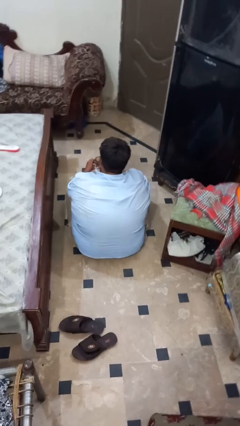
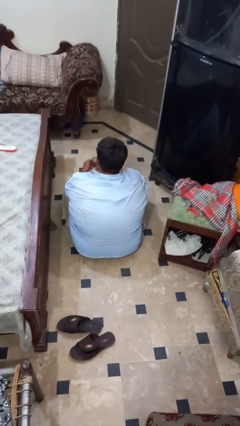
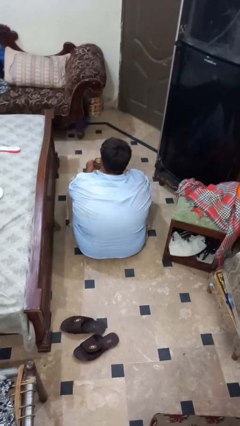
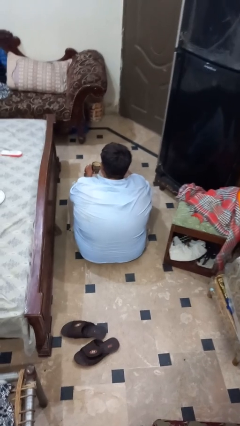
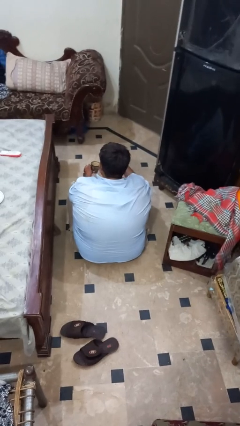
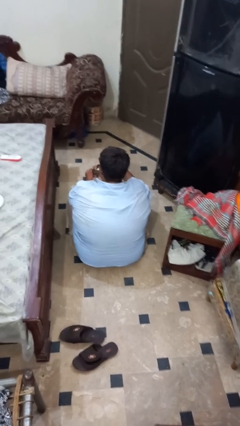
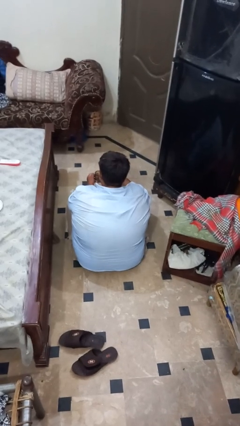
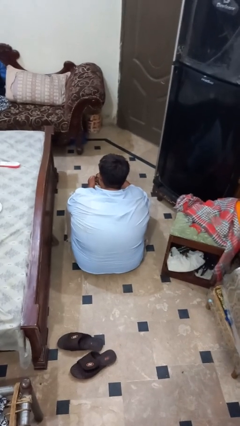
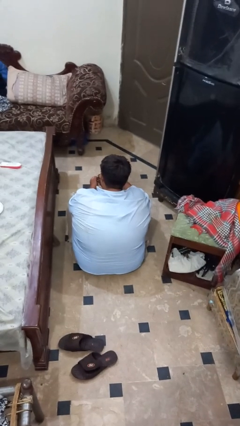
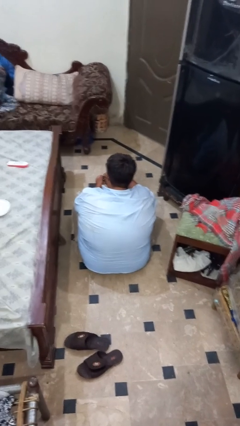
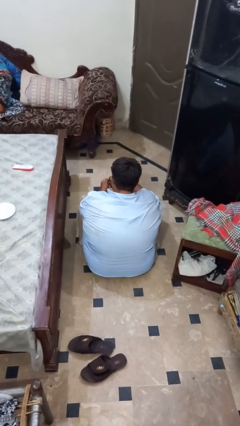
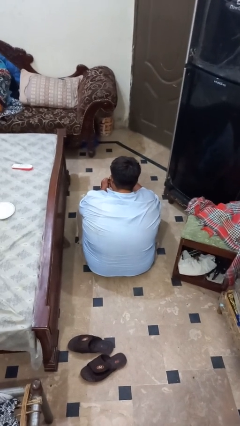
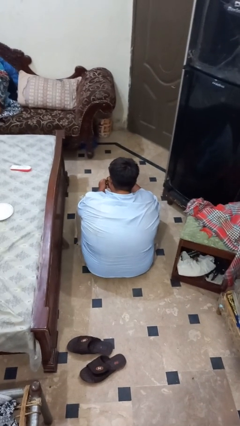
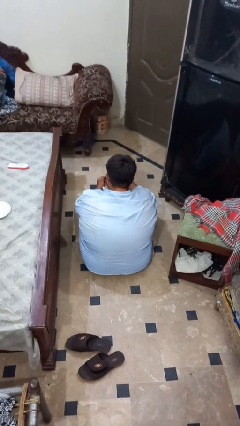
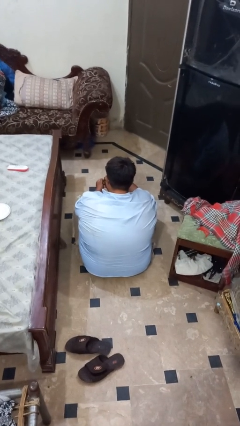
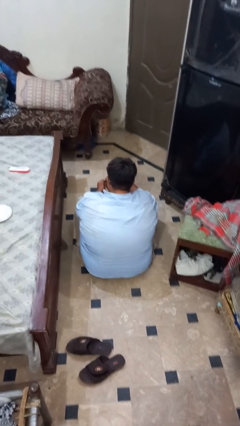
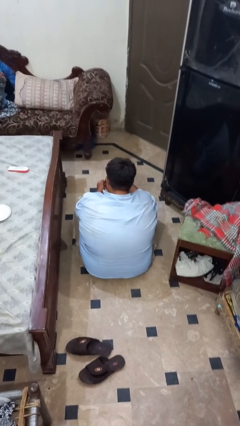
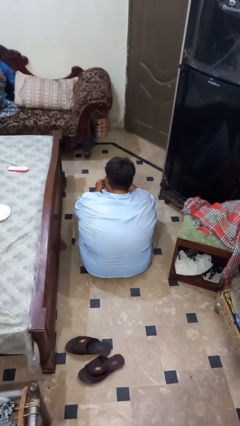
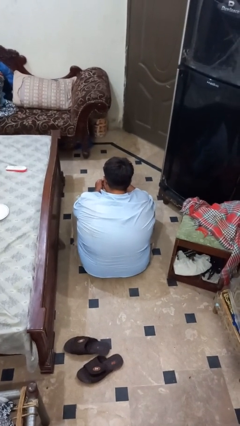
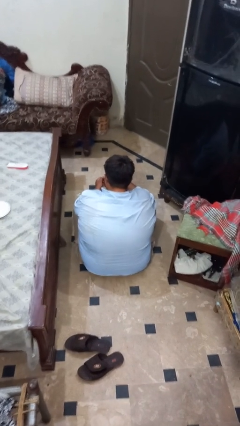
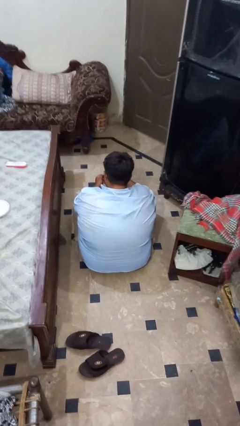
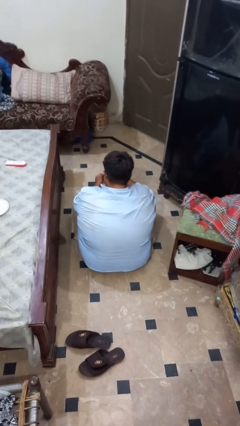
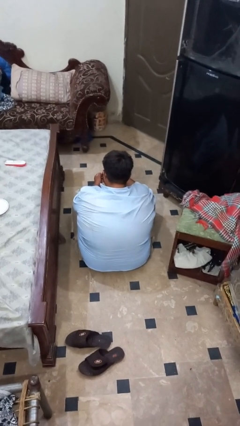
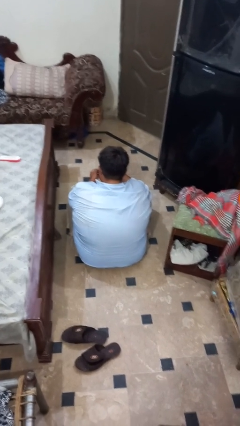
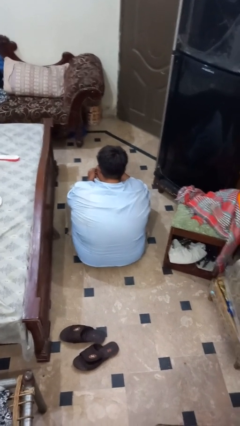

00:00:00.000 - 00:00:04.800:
person stirs mug

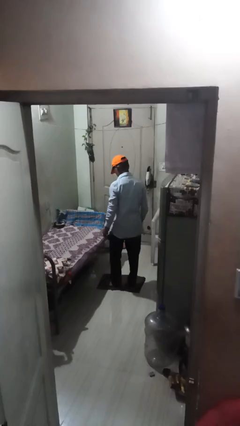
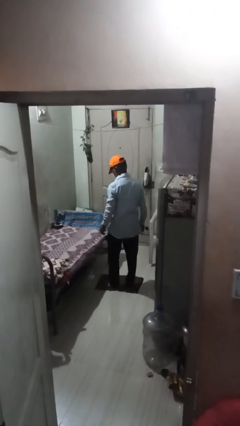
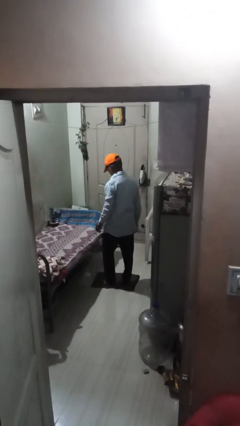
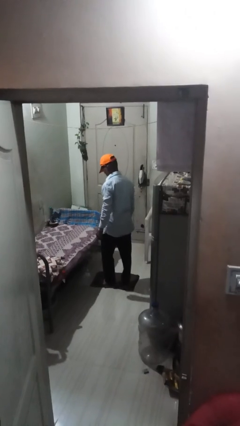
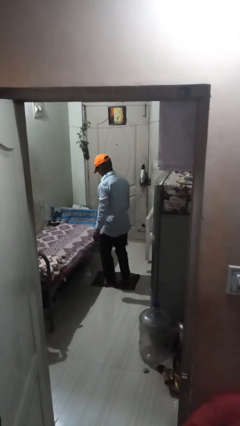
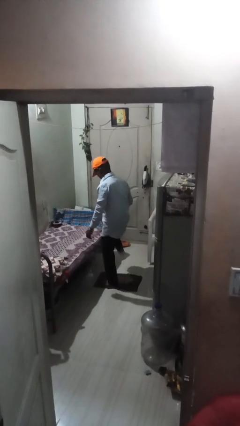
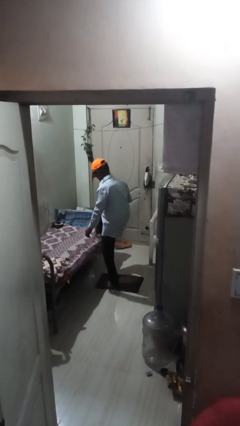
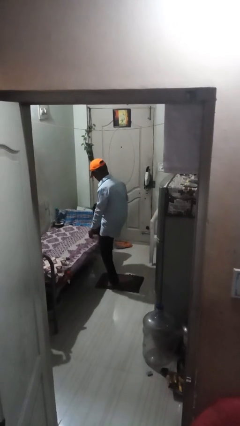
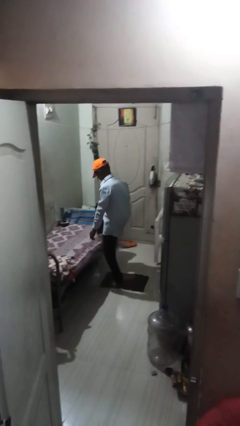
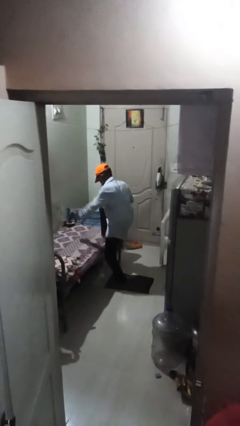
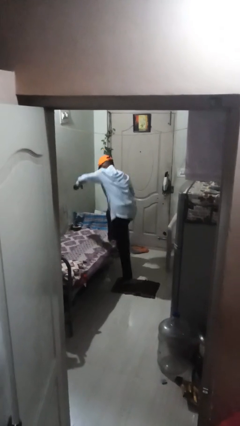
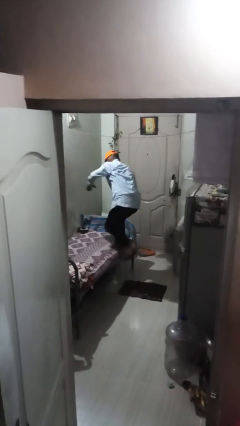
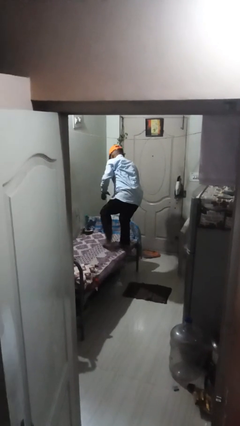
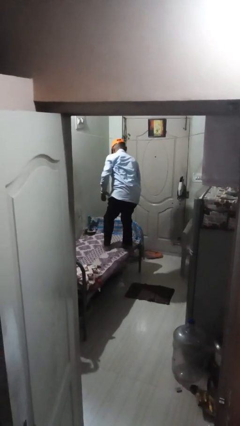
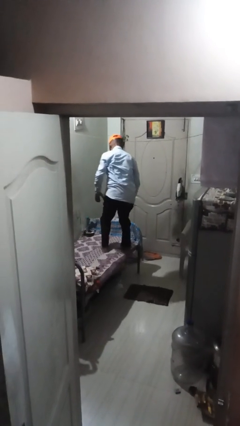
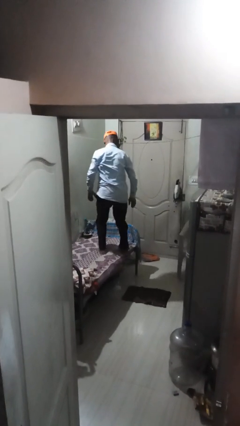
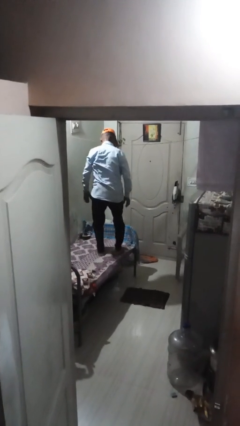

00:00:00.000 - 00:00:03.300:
person climbs on couch

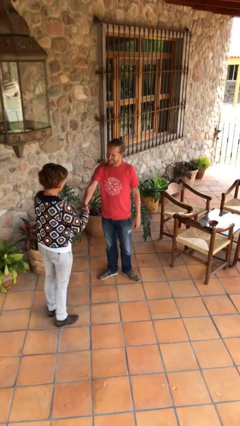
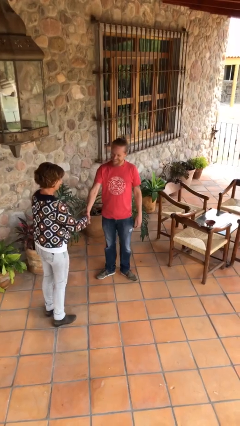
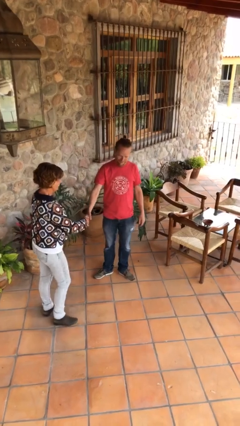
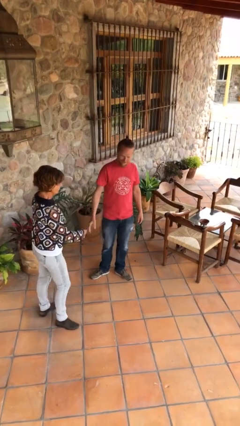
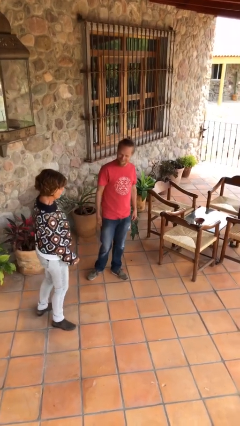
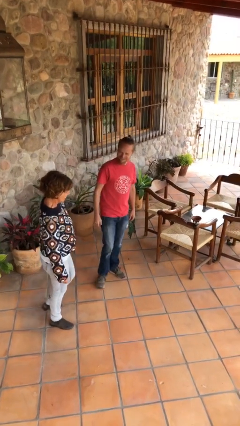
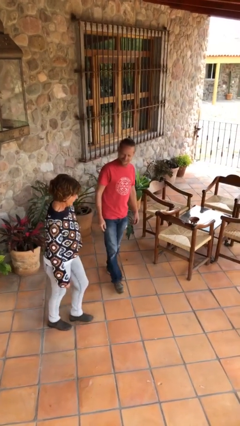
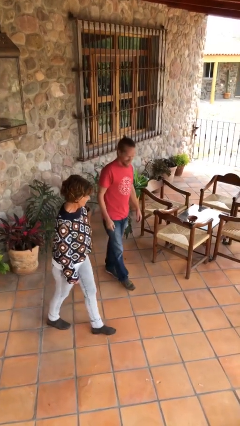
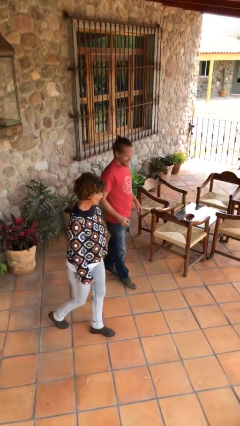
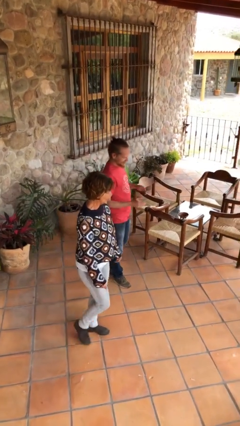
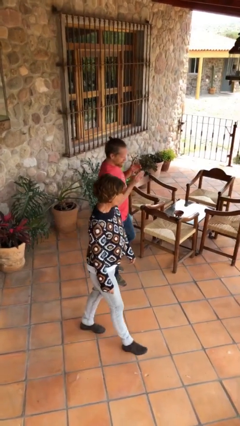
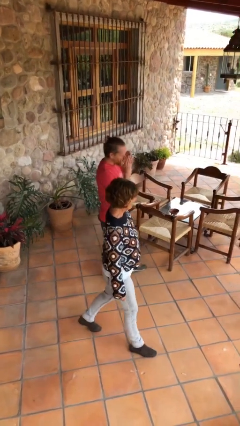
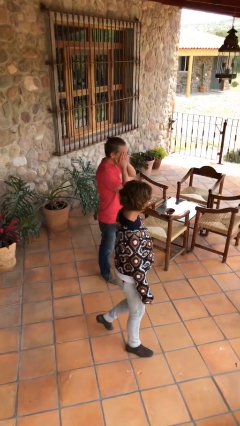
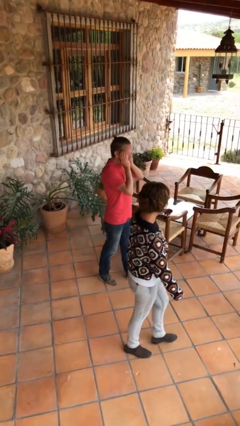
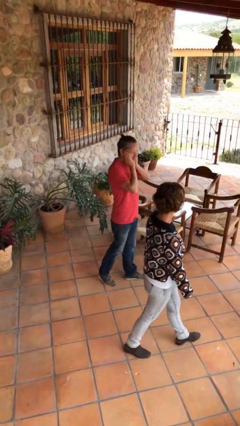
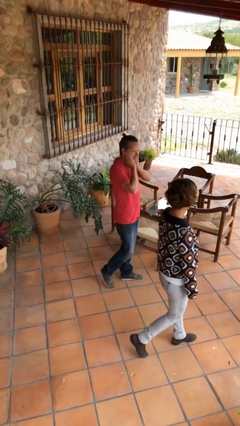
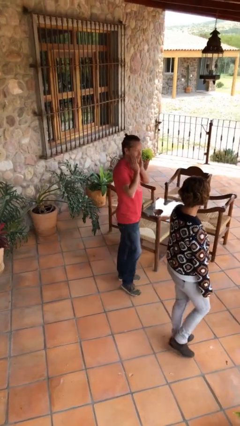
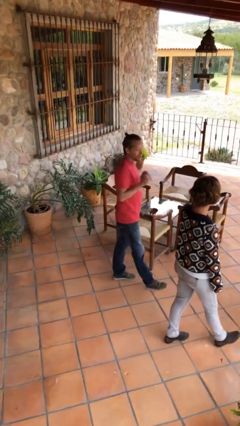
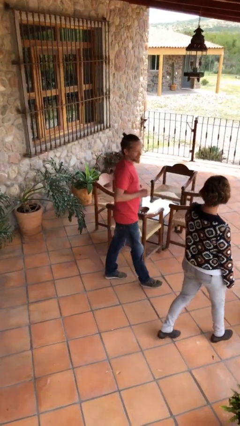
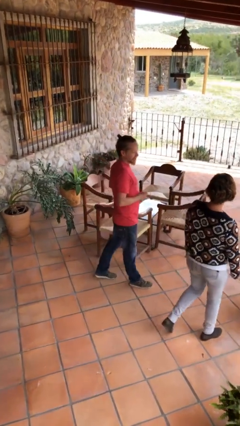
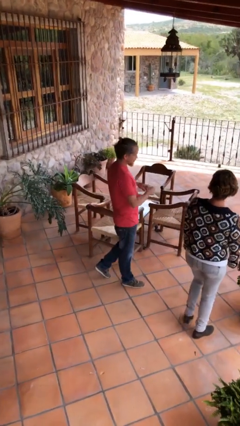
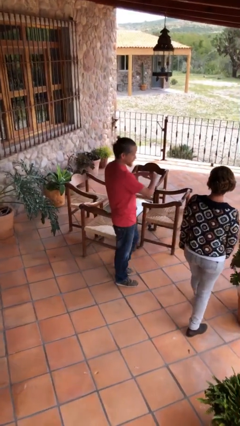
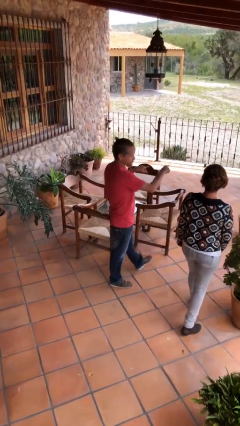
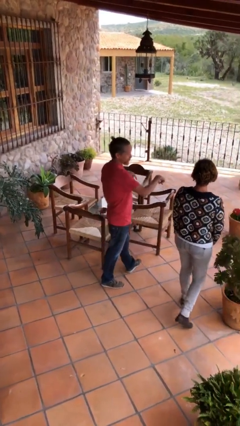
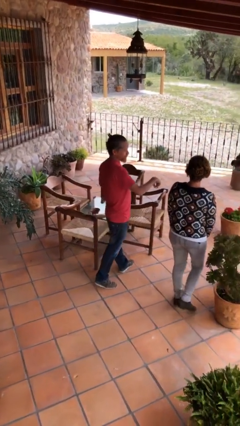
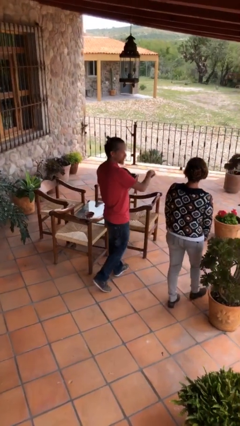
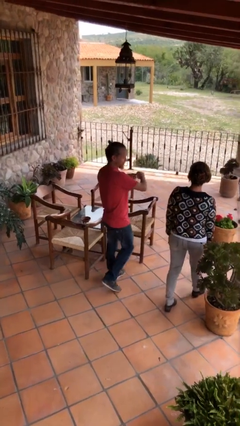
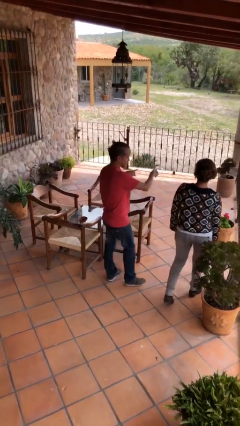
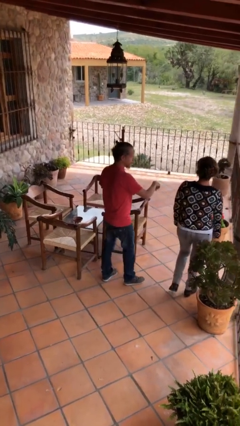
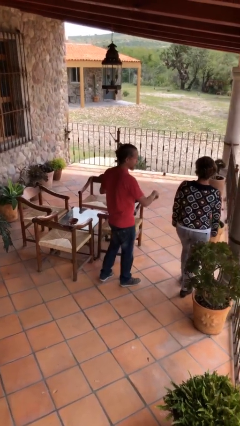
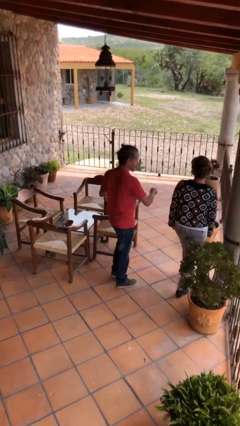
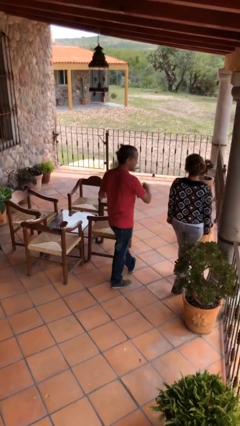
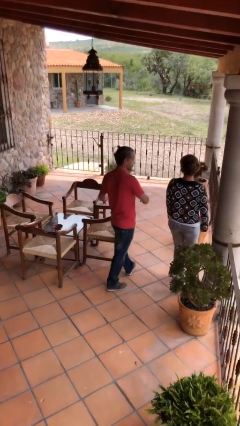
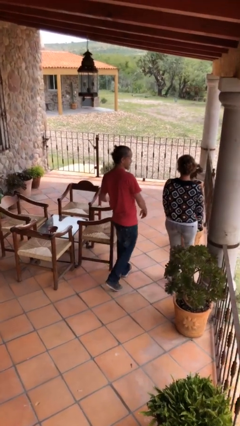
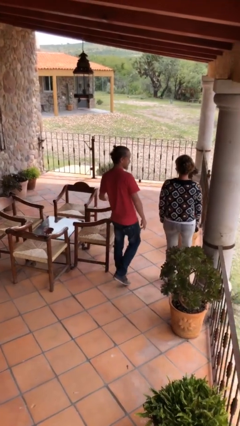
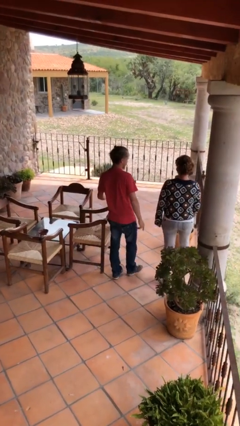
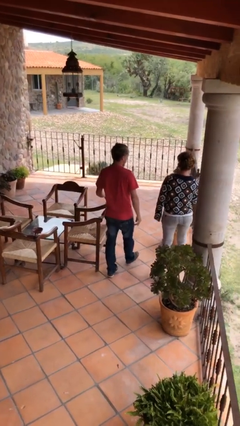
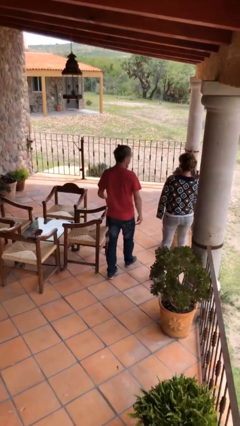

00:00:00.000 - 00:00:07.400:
person talks to person

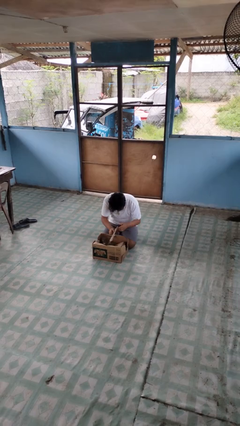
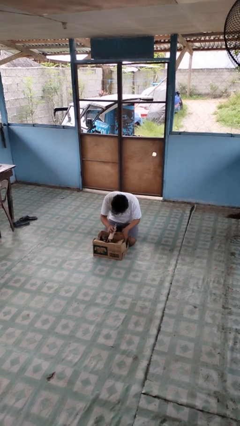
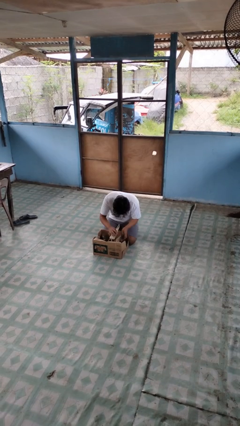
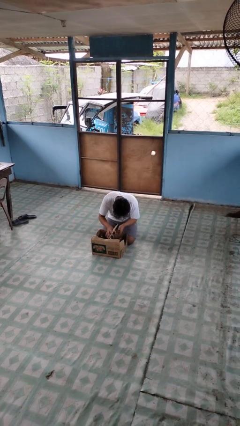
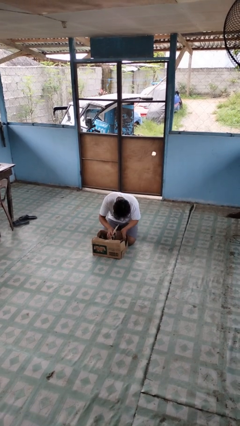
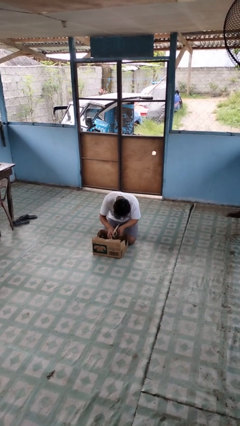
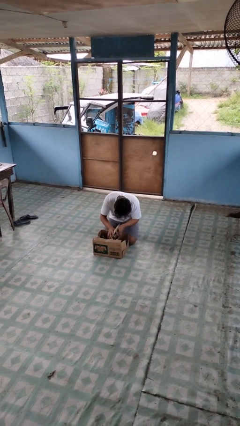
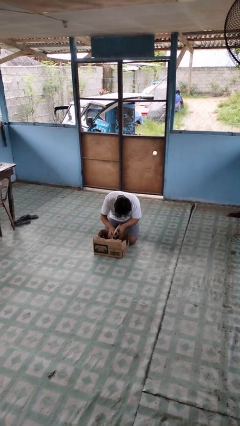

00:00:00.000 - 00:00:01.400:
person searches in box

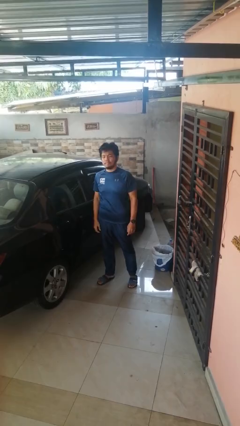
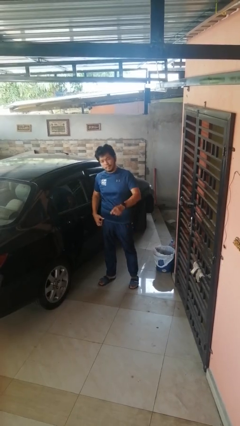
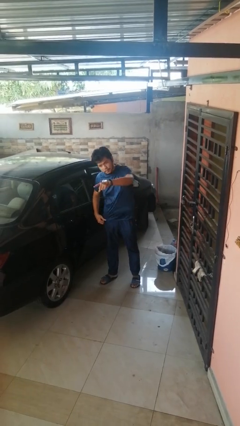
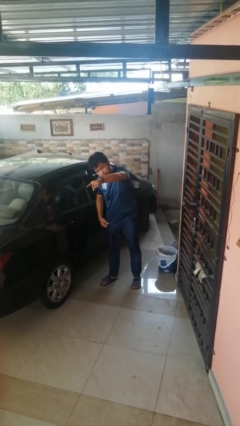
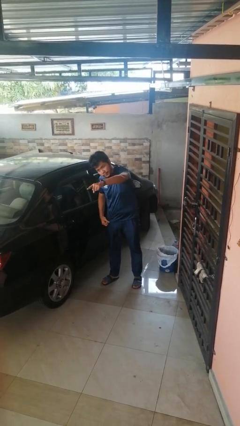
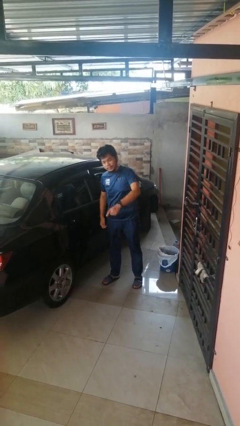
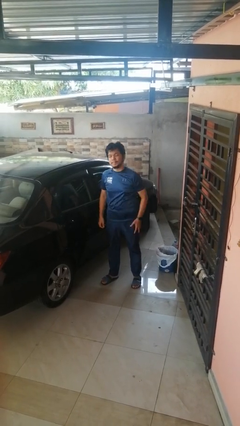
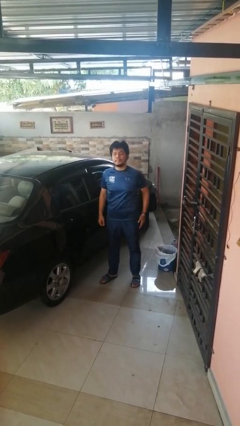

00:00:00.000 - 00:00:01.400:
person points at person
